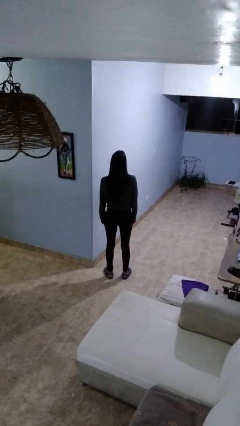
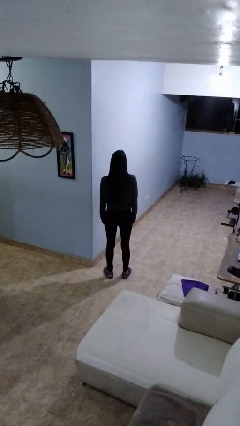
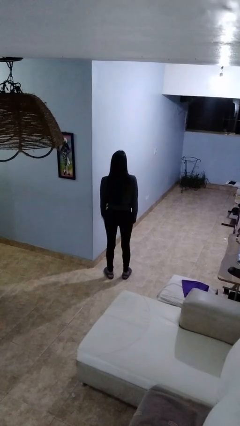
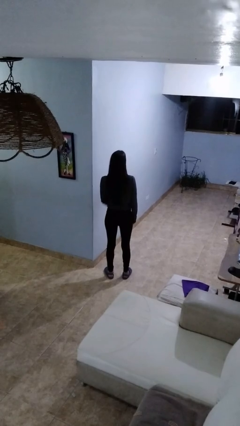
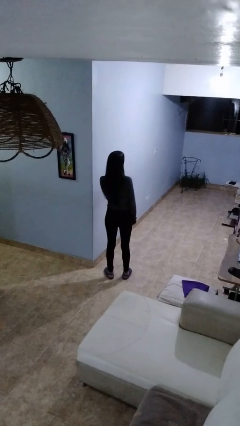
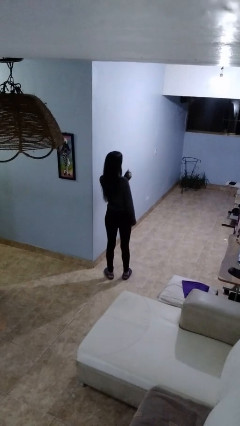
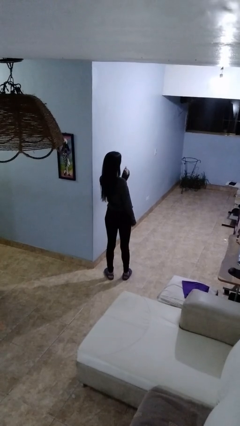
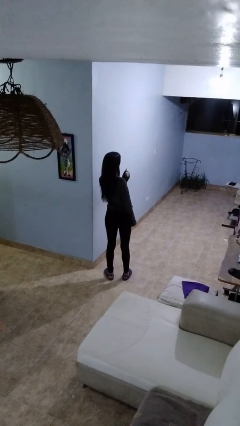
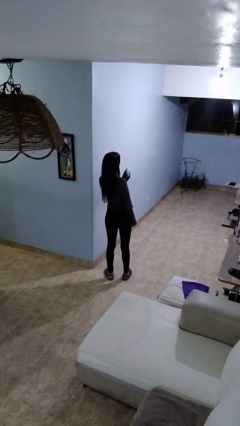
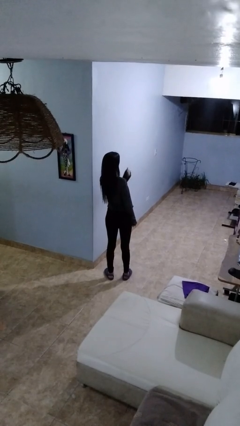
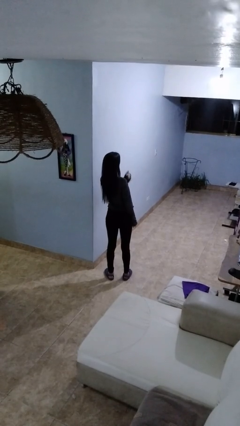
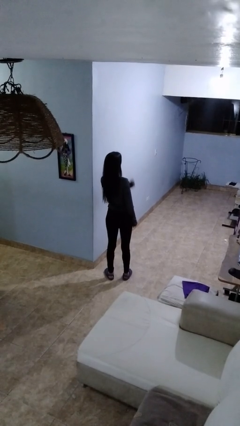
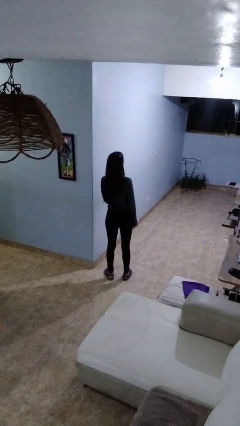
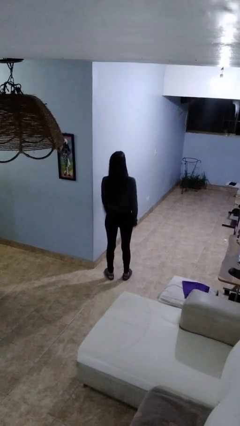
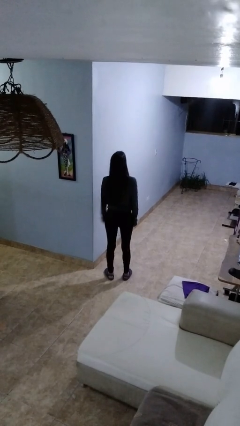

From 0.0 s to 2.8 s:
person gestures behind me

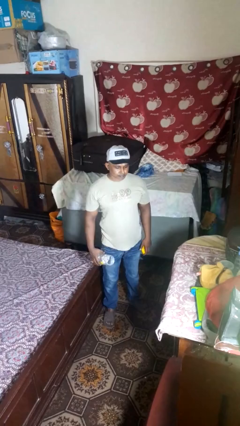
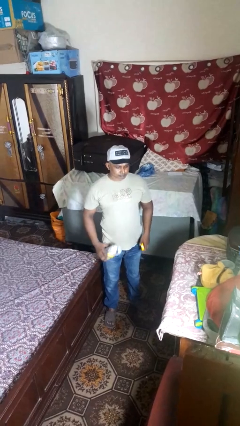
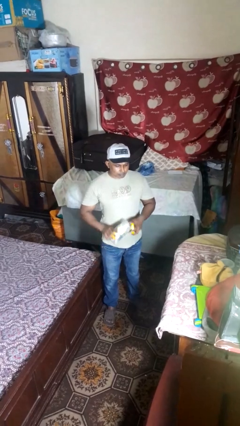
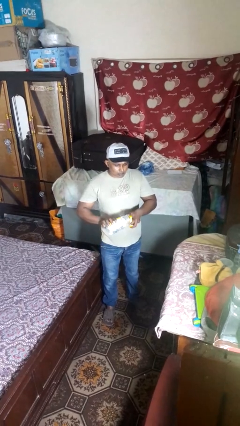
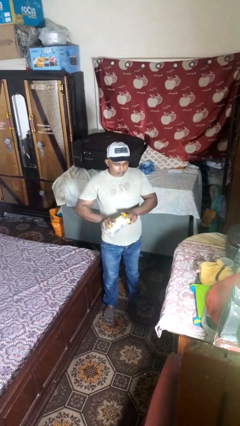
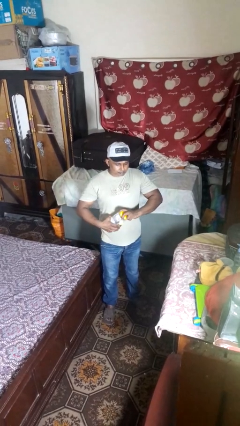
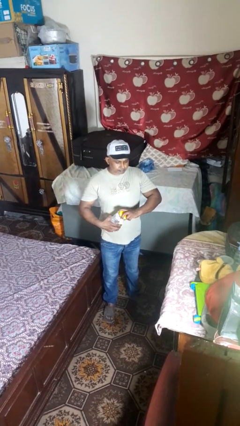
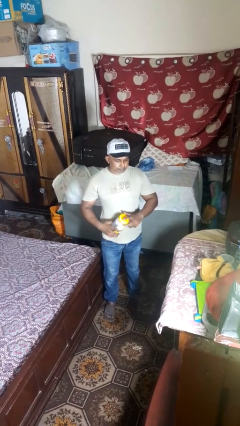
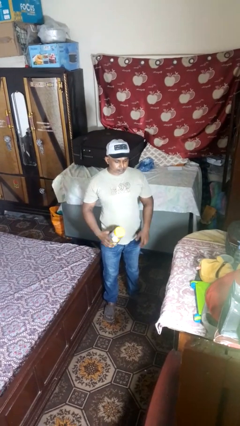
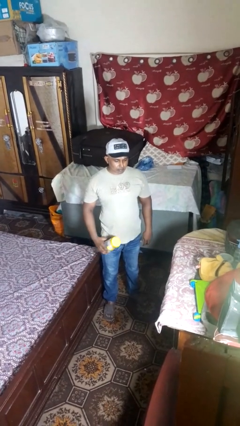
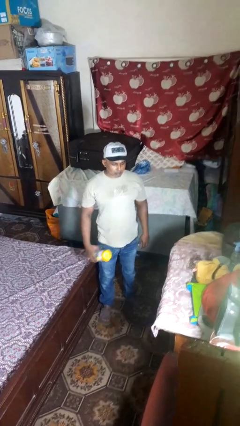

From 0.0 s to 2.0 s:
person closes jar

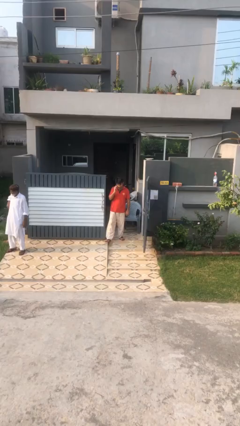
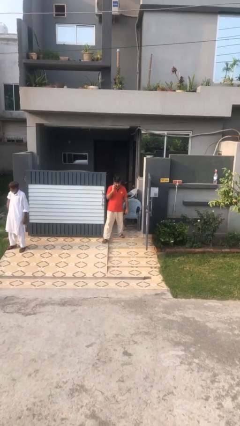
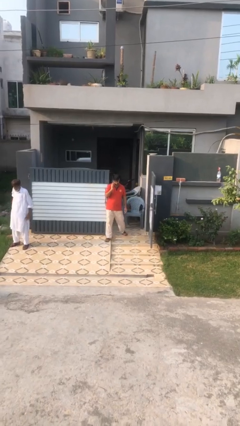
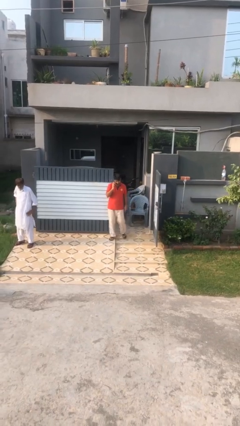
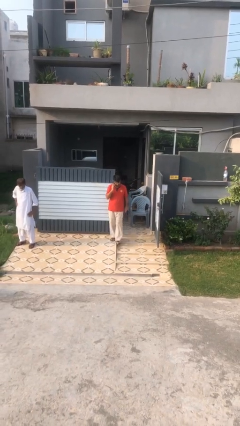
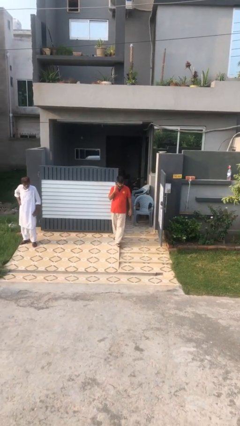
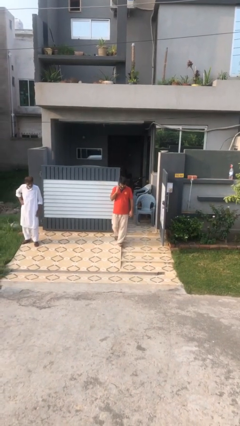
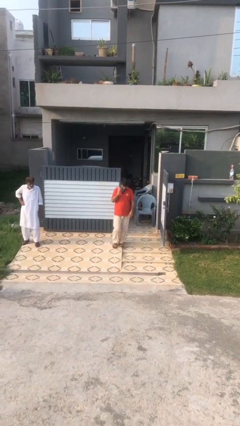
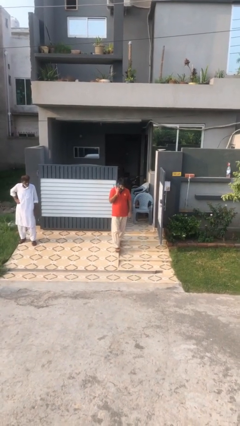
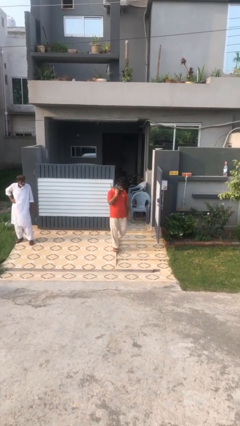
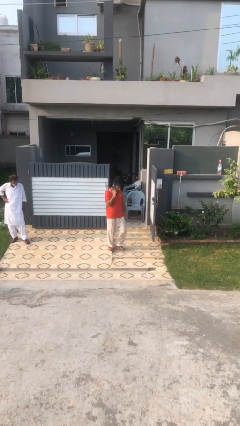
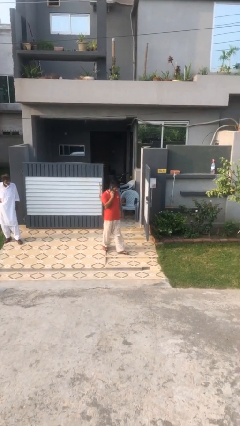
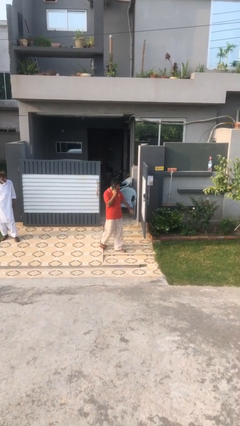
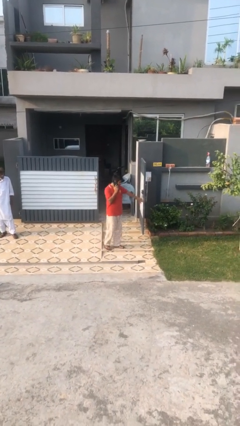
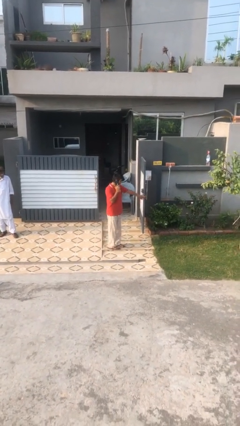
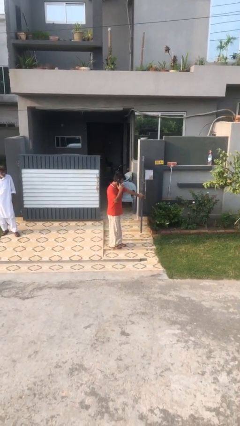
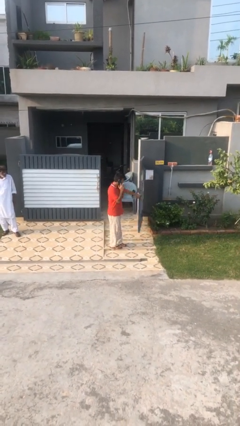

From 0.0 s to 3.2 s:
person enters scene through structure

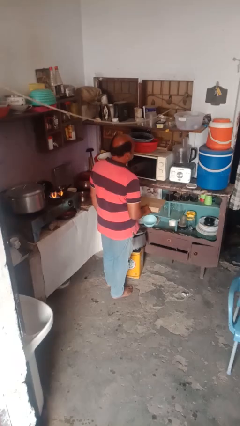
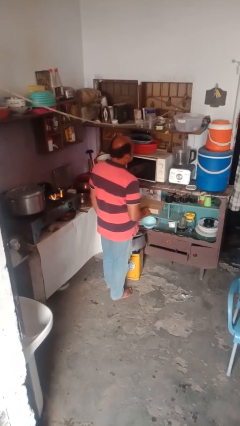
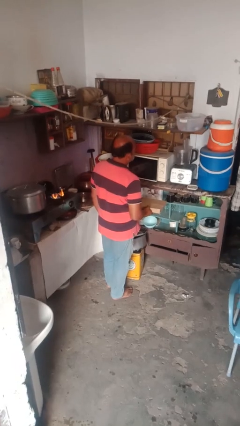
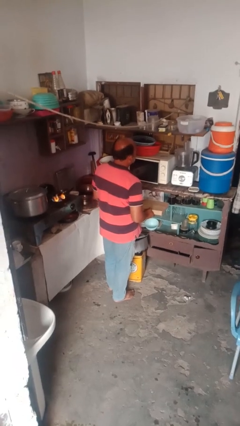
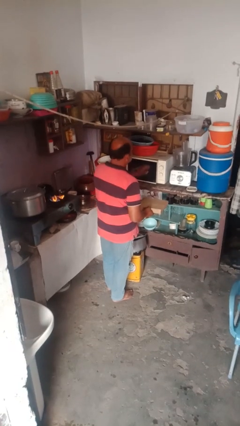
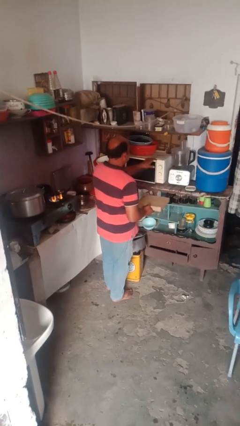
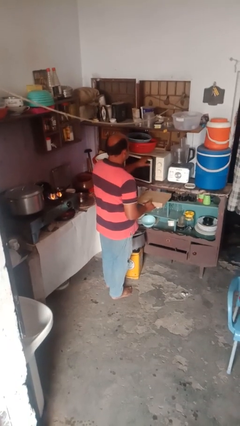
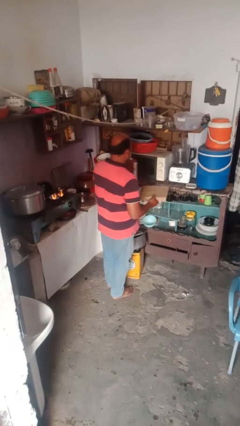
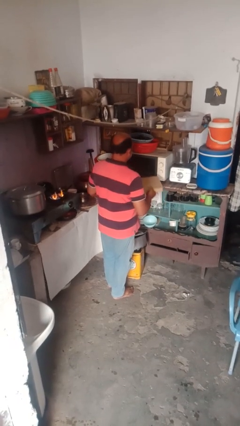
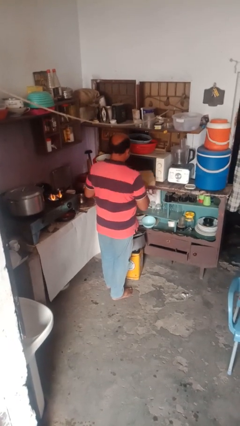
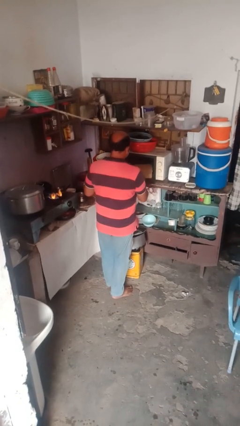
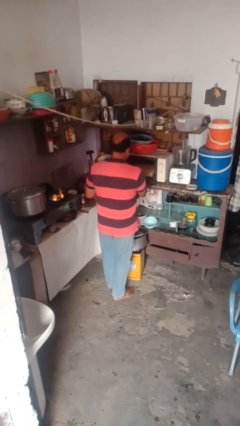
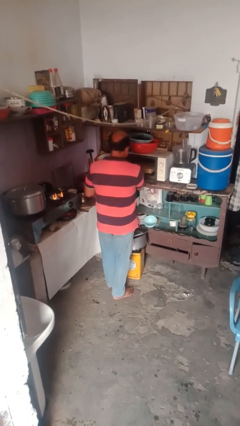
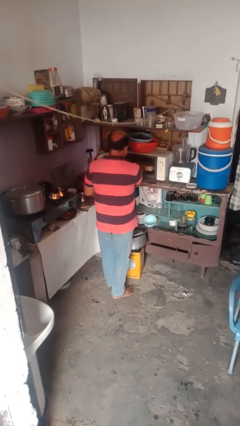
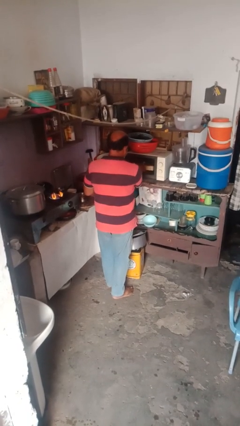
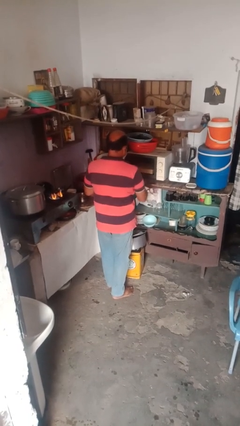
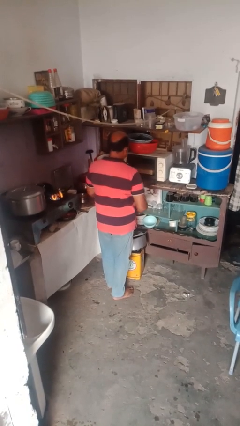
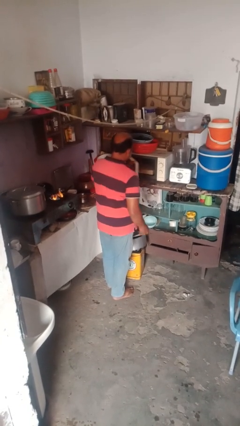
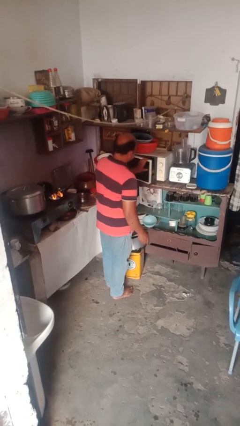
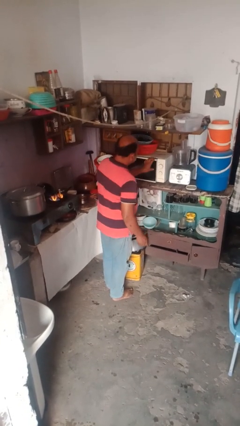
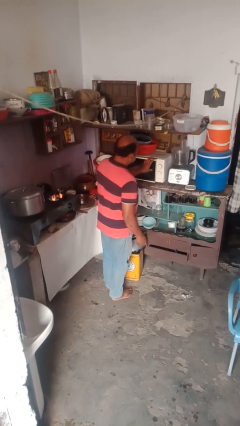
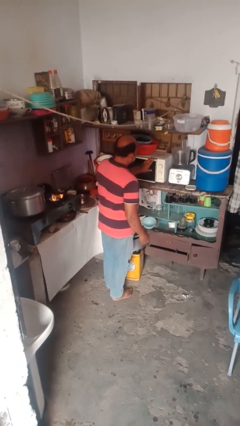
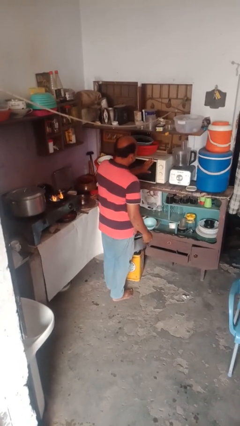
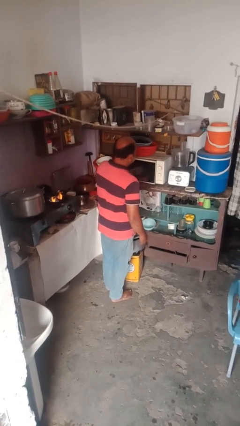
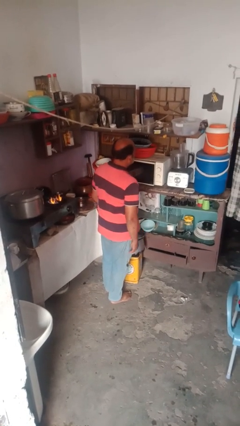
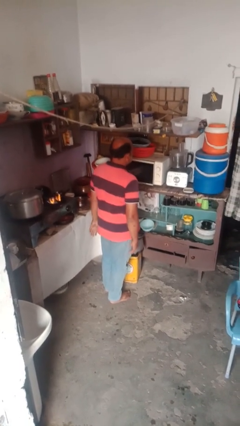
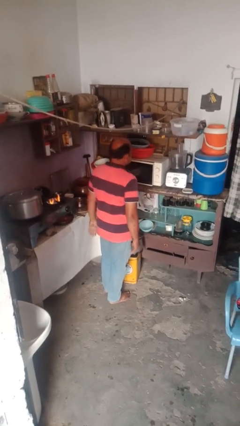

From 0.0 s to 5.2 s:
person puts object into microwave

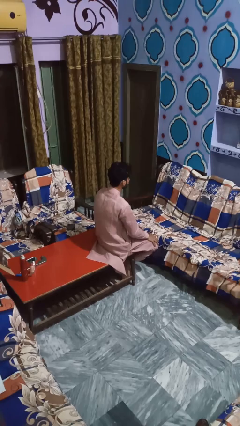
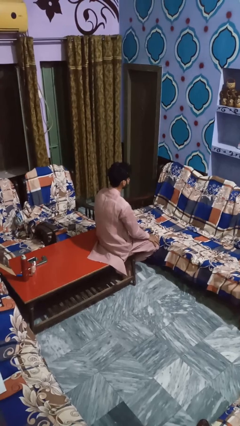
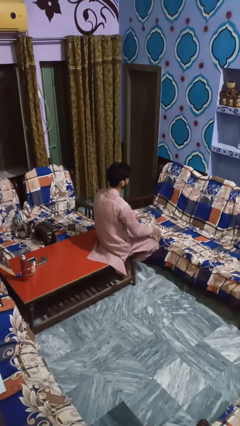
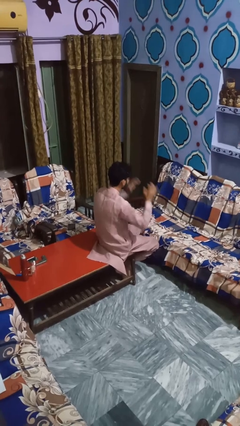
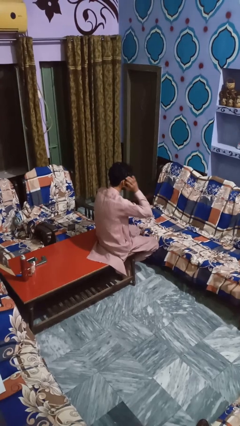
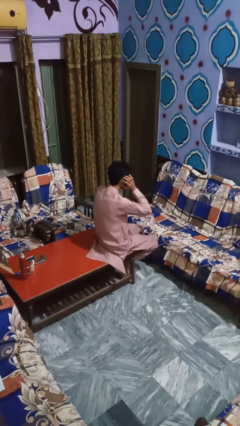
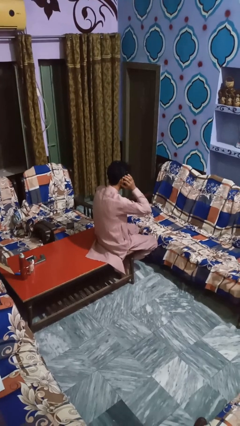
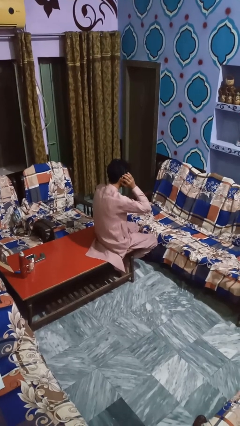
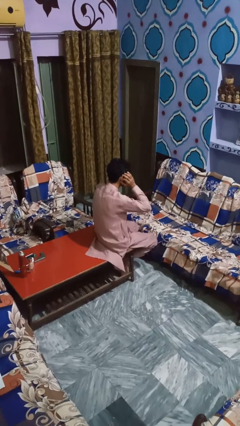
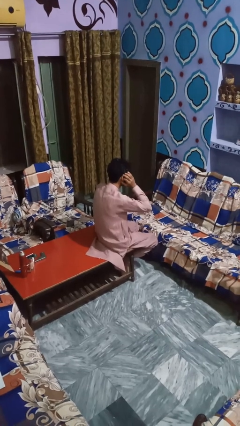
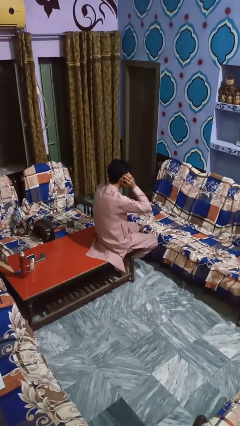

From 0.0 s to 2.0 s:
person puts fingers in ear

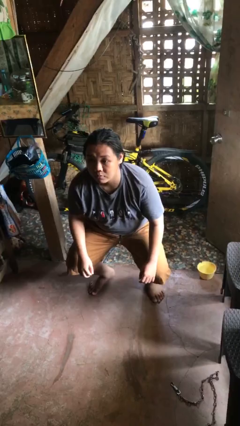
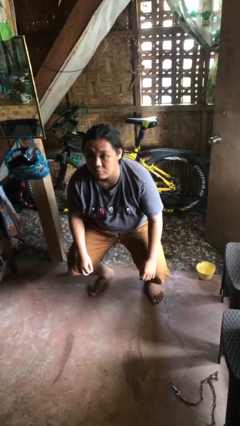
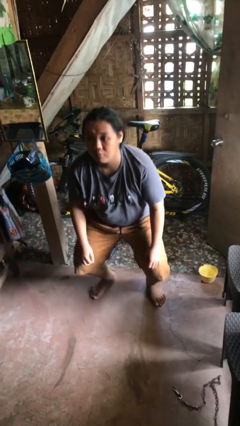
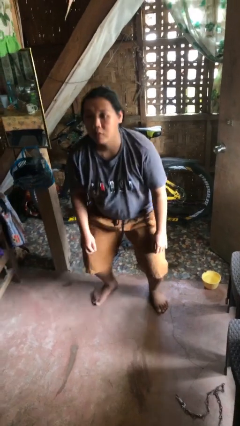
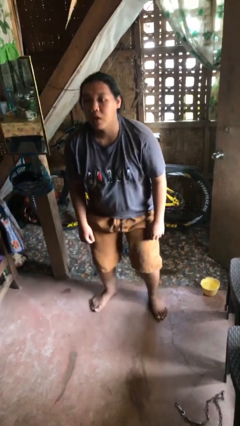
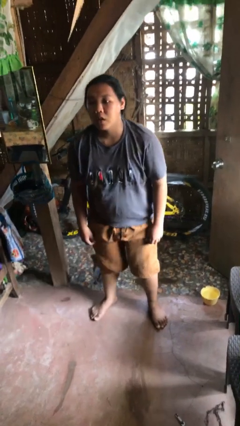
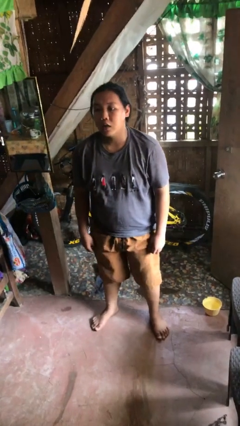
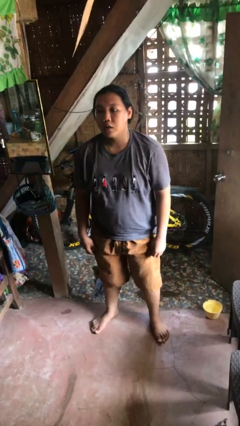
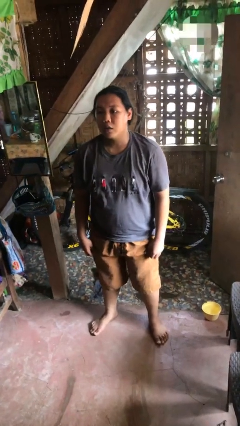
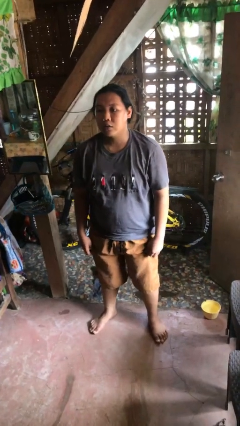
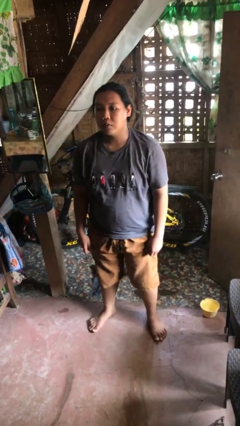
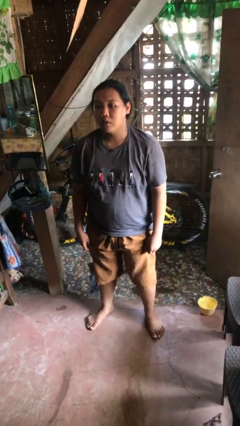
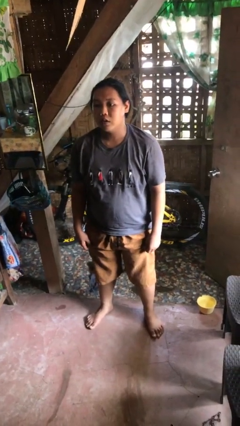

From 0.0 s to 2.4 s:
person stands up
